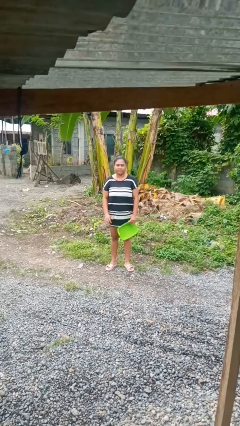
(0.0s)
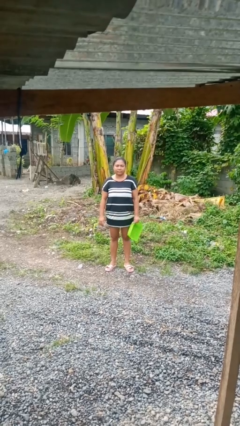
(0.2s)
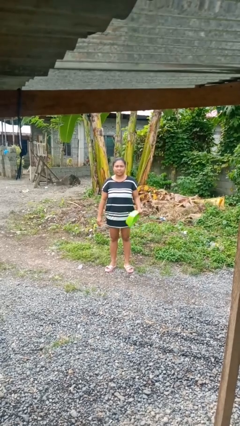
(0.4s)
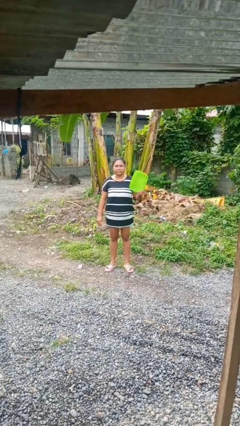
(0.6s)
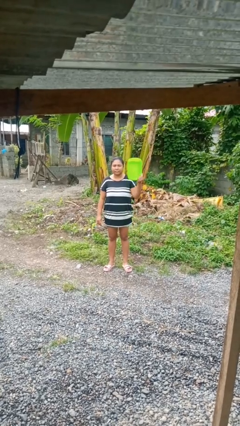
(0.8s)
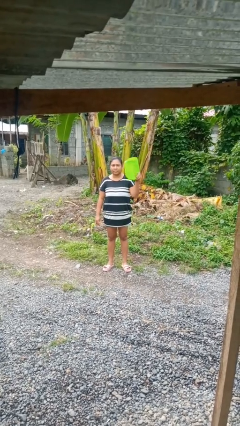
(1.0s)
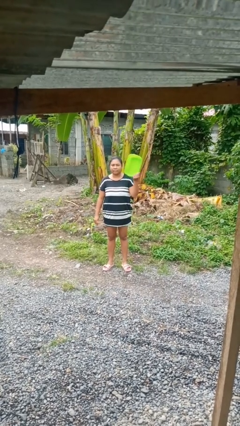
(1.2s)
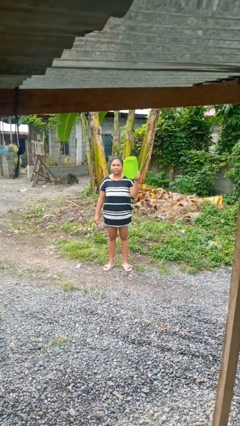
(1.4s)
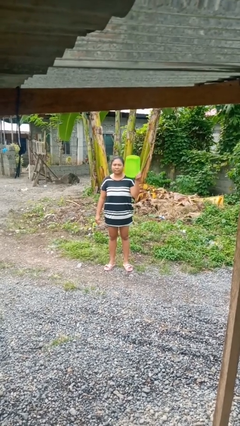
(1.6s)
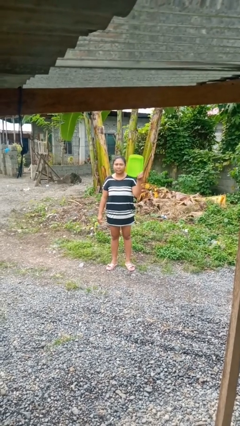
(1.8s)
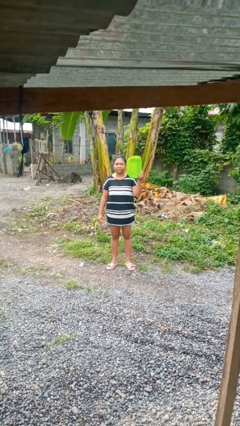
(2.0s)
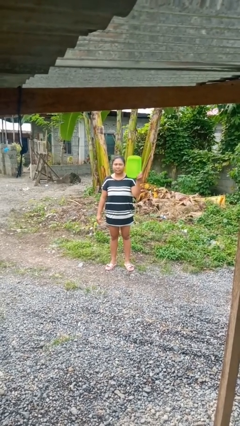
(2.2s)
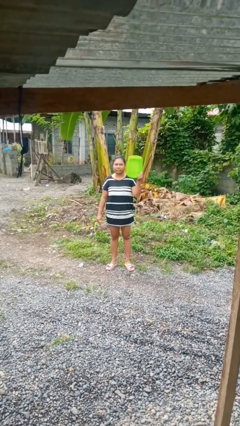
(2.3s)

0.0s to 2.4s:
person holds object above head

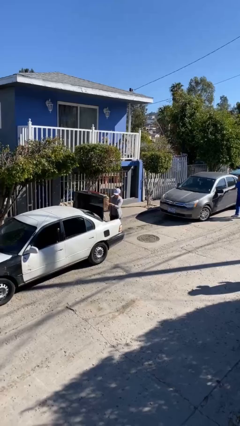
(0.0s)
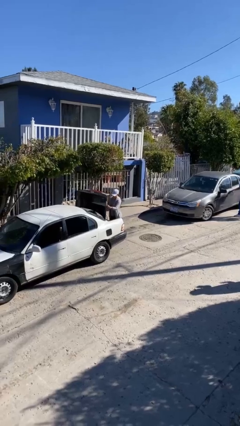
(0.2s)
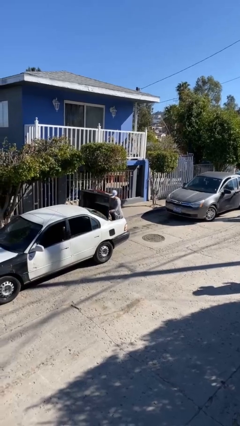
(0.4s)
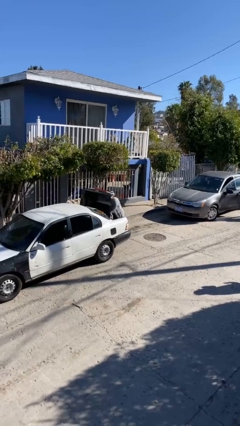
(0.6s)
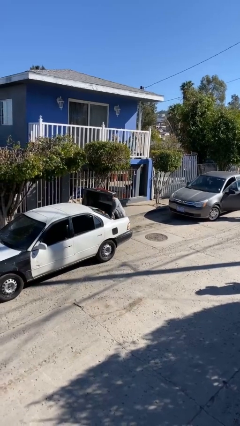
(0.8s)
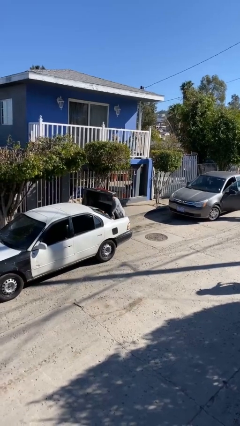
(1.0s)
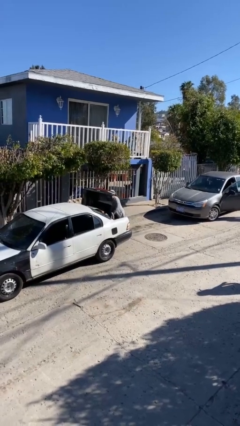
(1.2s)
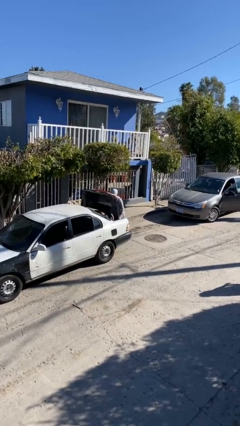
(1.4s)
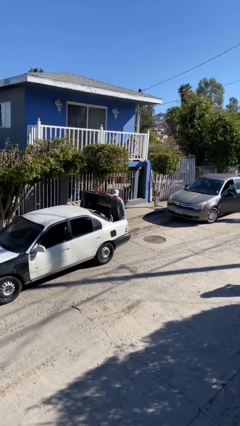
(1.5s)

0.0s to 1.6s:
person loads car

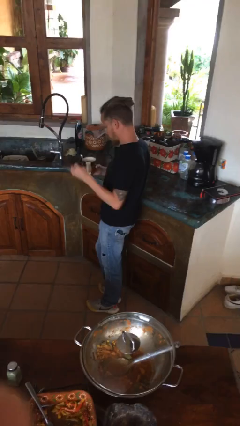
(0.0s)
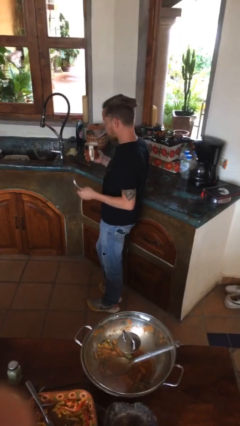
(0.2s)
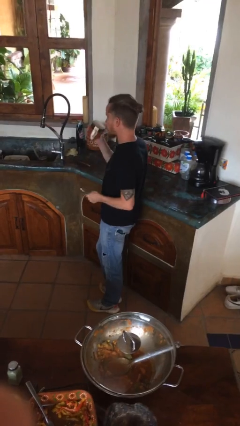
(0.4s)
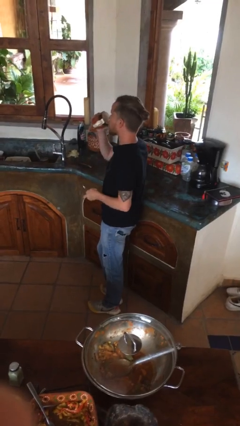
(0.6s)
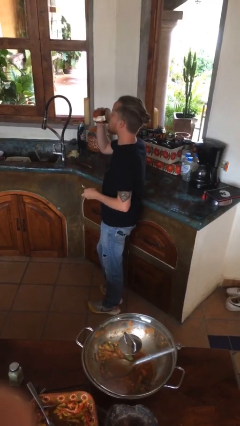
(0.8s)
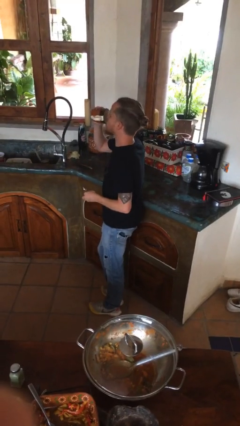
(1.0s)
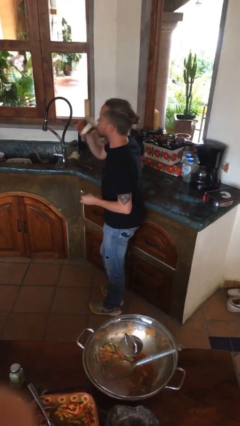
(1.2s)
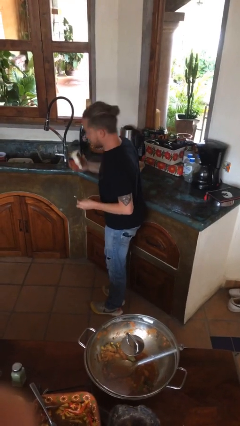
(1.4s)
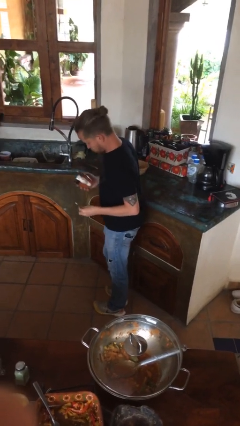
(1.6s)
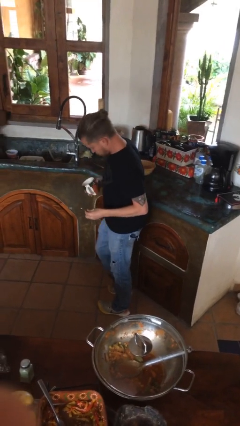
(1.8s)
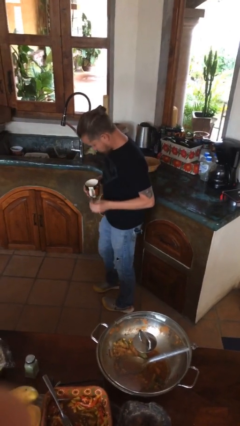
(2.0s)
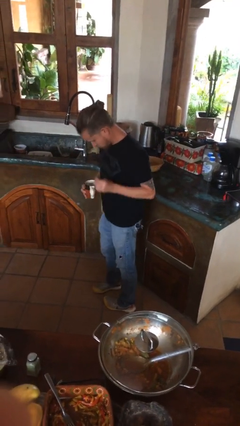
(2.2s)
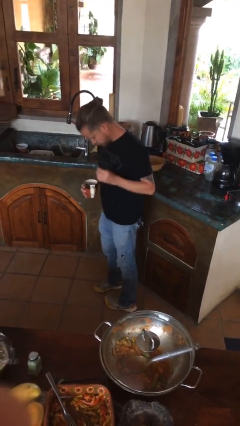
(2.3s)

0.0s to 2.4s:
person drinks from mug

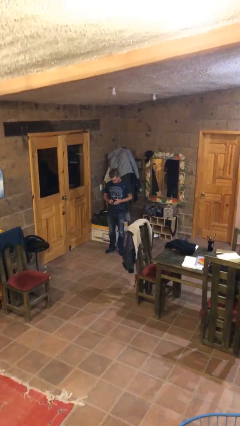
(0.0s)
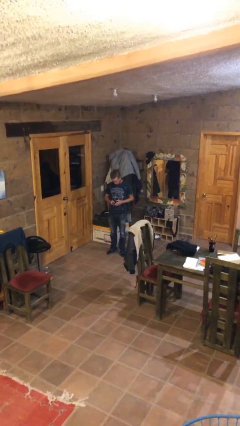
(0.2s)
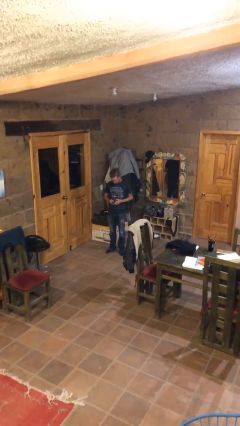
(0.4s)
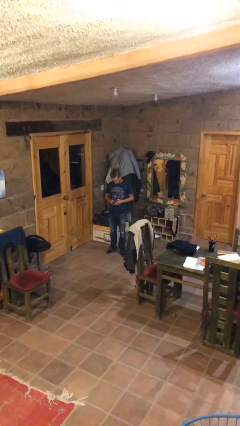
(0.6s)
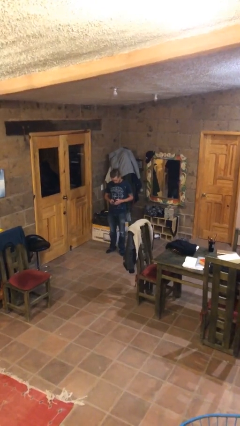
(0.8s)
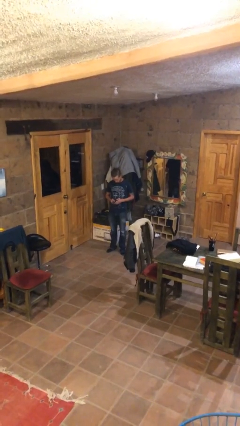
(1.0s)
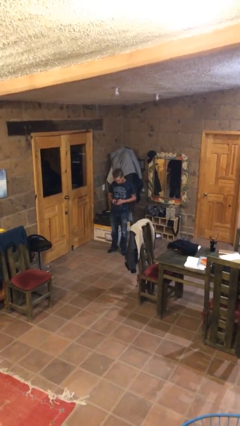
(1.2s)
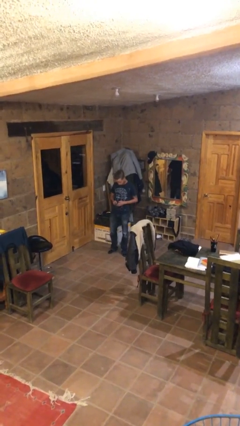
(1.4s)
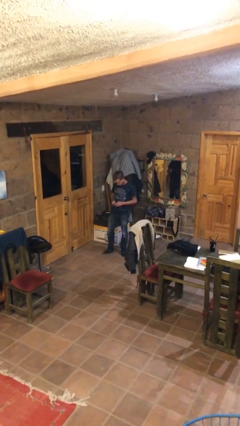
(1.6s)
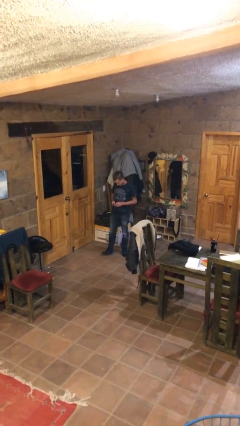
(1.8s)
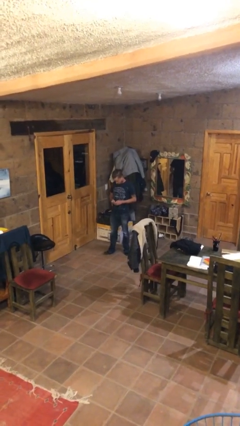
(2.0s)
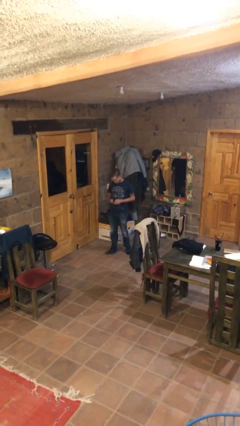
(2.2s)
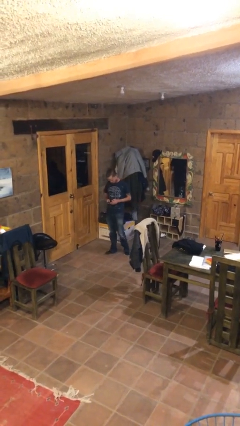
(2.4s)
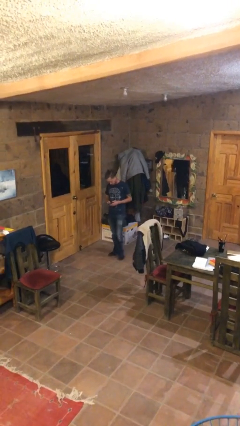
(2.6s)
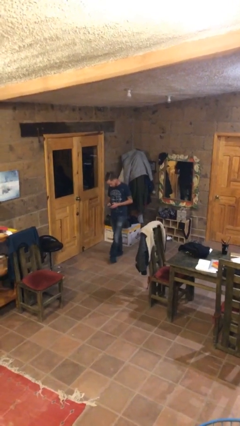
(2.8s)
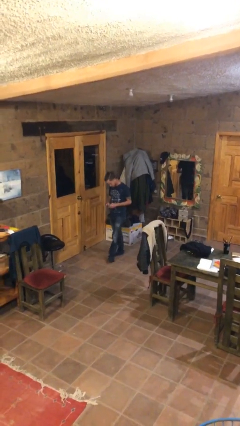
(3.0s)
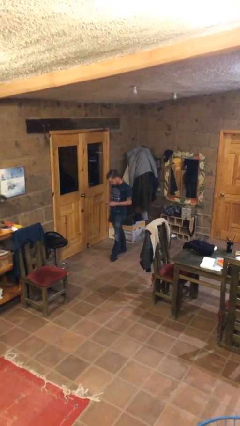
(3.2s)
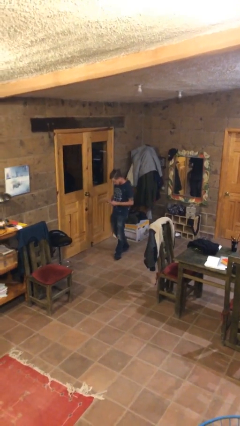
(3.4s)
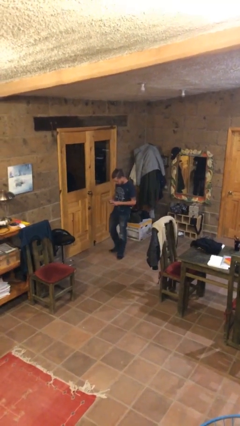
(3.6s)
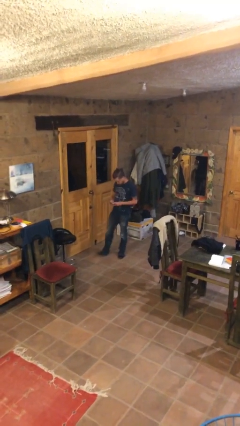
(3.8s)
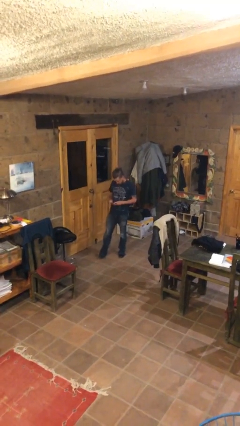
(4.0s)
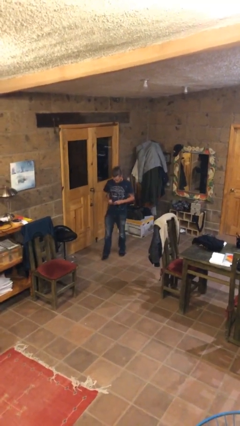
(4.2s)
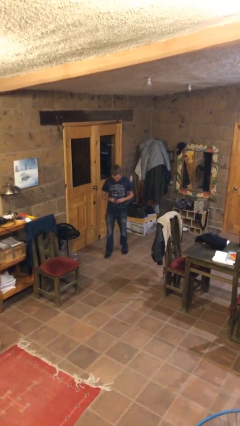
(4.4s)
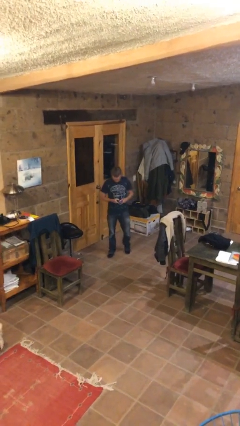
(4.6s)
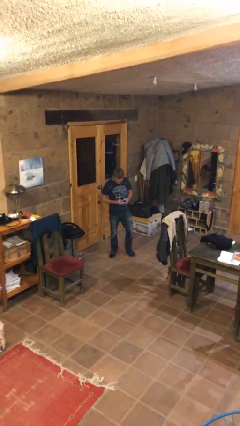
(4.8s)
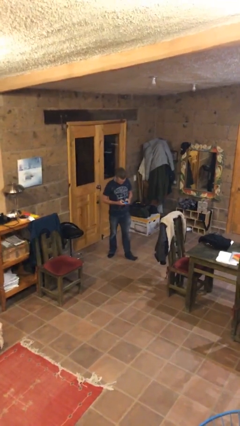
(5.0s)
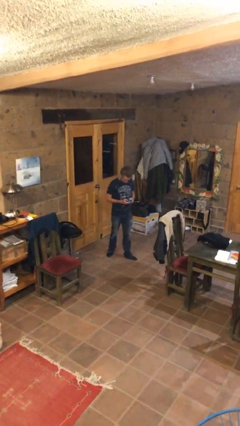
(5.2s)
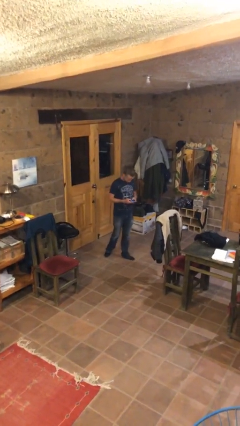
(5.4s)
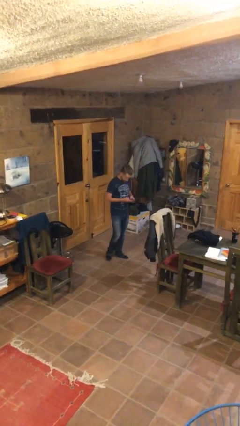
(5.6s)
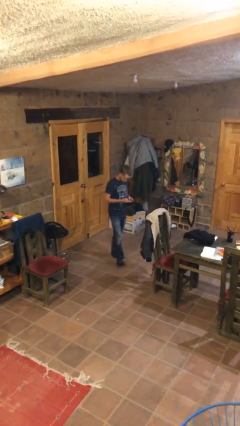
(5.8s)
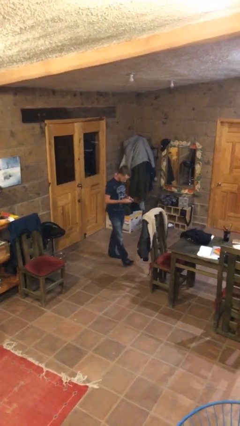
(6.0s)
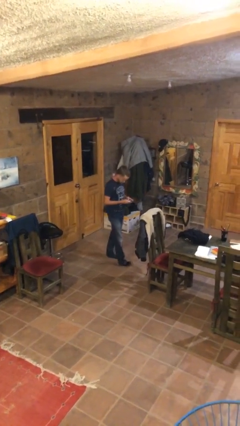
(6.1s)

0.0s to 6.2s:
person texts on phone

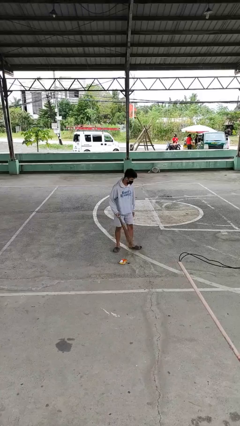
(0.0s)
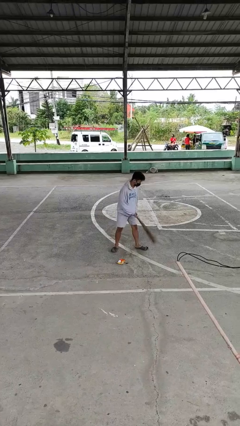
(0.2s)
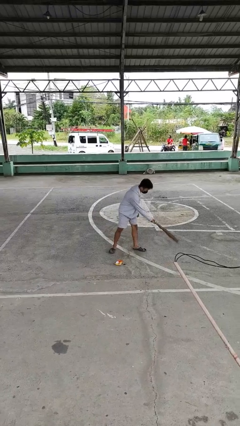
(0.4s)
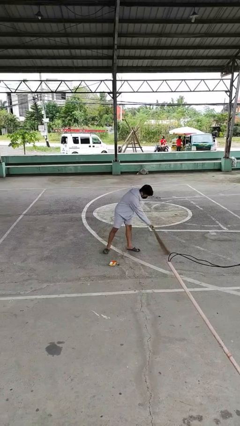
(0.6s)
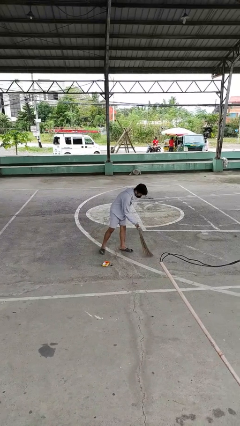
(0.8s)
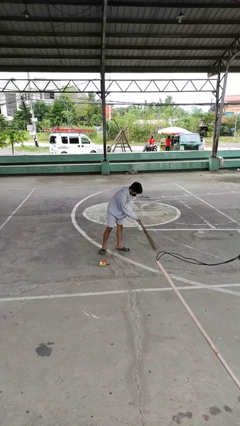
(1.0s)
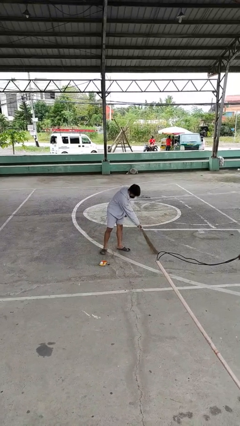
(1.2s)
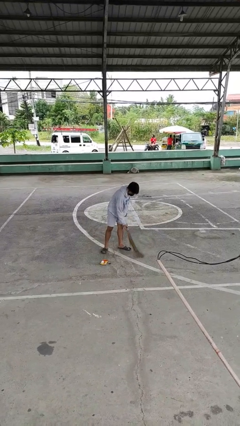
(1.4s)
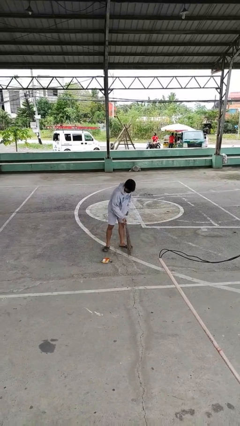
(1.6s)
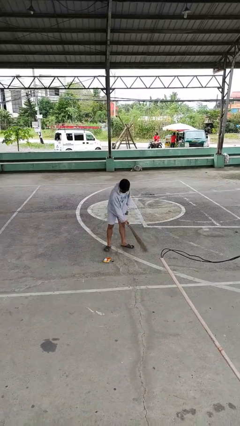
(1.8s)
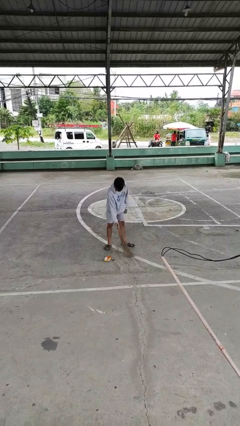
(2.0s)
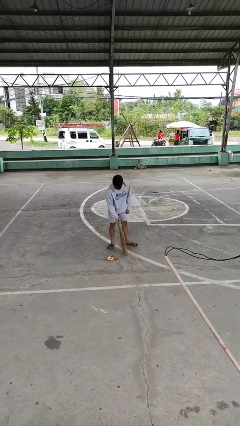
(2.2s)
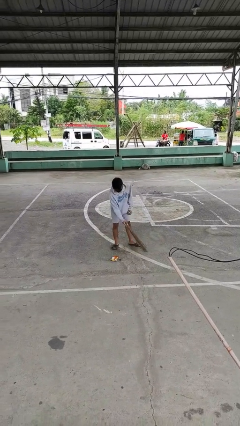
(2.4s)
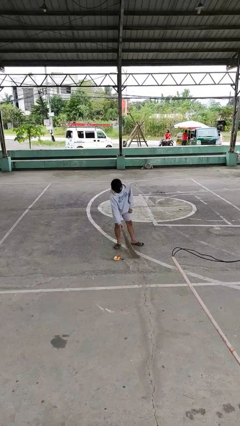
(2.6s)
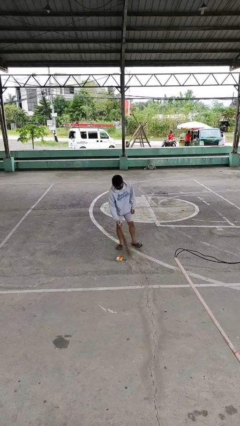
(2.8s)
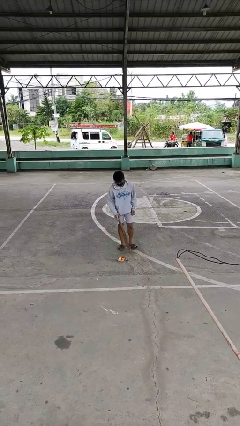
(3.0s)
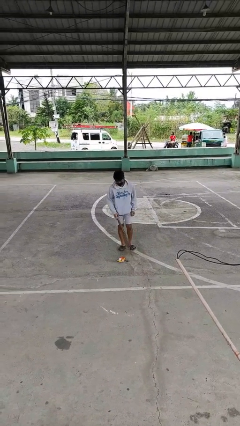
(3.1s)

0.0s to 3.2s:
person sweeps floor

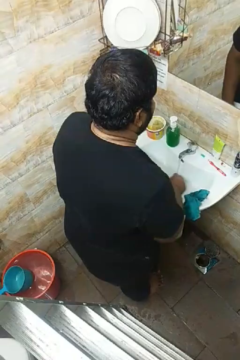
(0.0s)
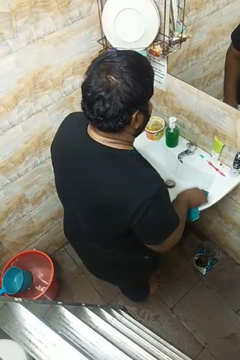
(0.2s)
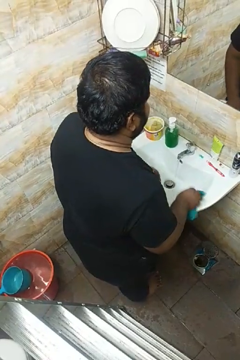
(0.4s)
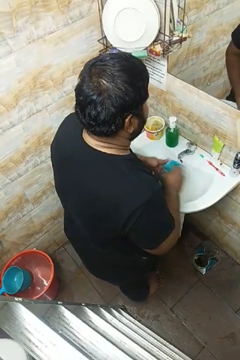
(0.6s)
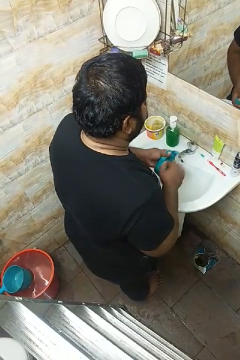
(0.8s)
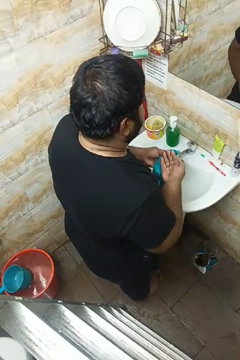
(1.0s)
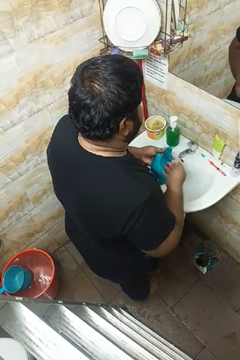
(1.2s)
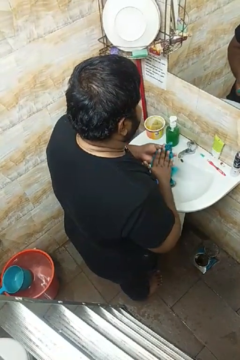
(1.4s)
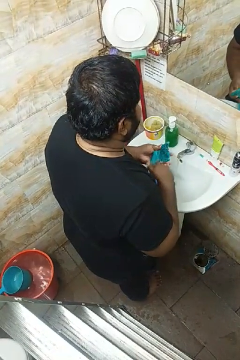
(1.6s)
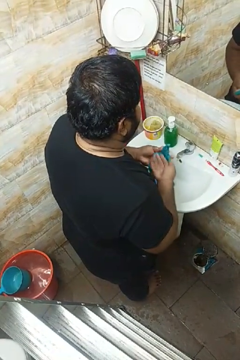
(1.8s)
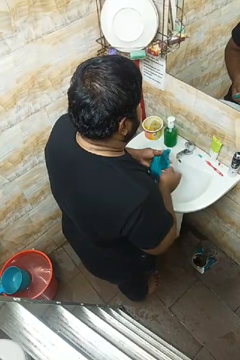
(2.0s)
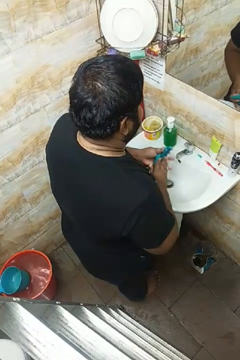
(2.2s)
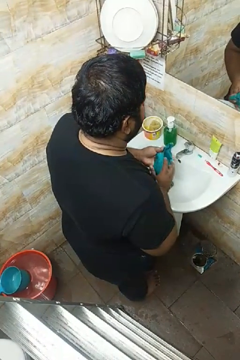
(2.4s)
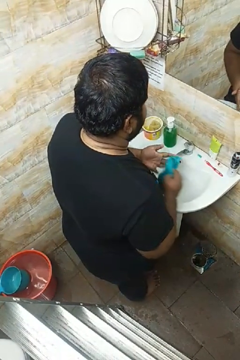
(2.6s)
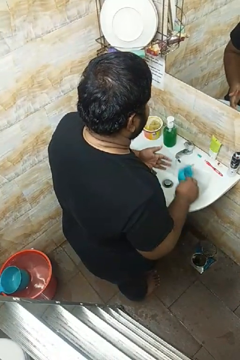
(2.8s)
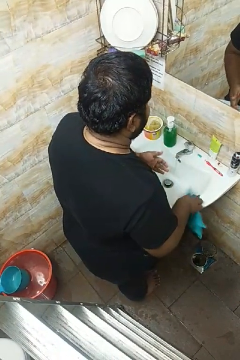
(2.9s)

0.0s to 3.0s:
person dries hands with towel
